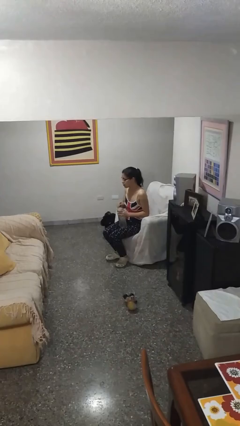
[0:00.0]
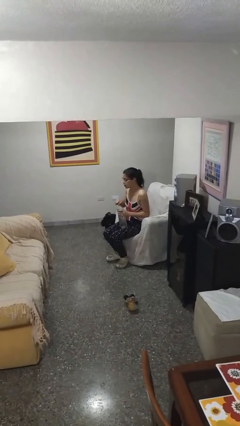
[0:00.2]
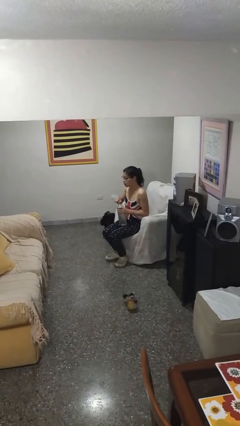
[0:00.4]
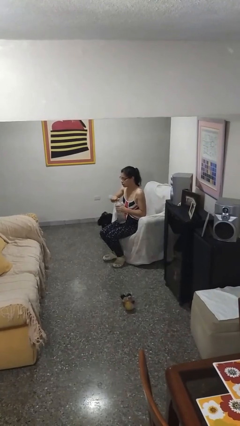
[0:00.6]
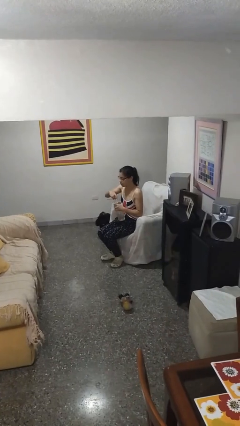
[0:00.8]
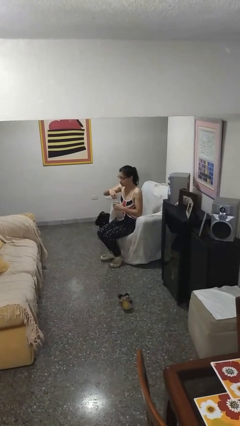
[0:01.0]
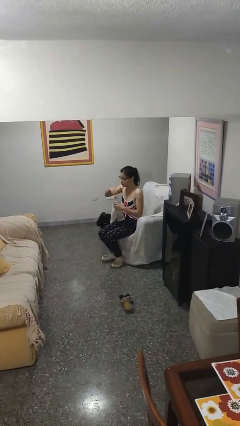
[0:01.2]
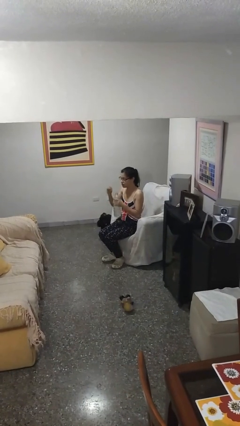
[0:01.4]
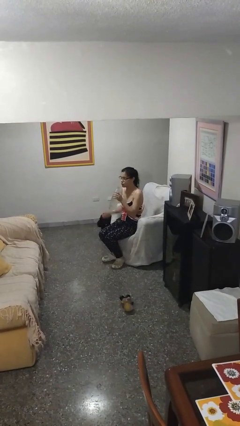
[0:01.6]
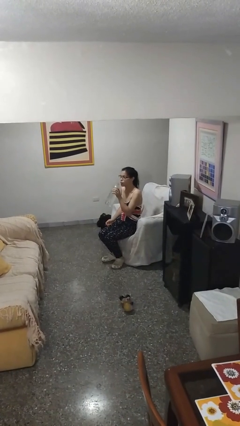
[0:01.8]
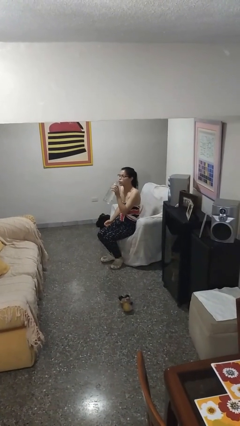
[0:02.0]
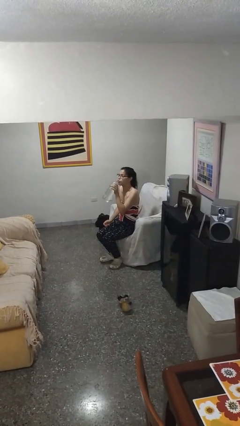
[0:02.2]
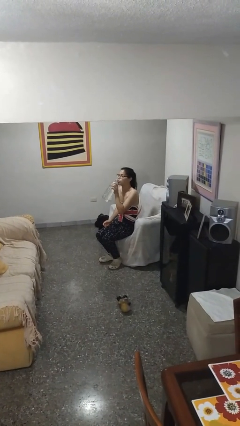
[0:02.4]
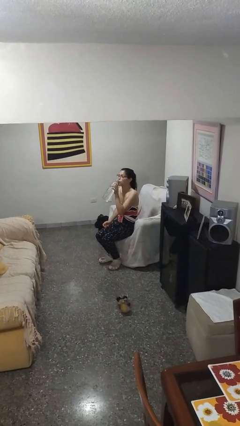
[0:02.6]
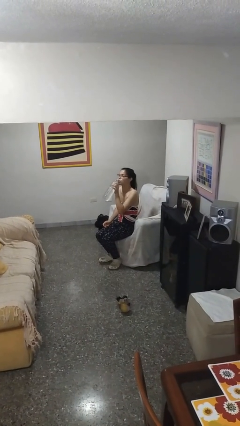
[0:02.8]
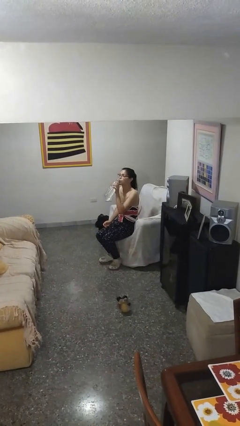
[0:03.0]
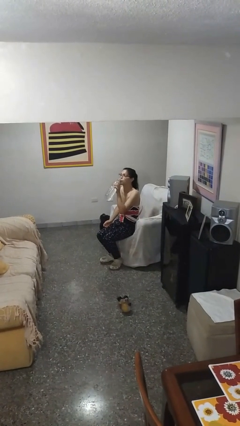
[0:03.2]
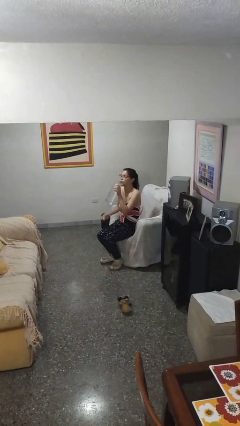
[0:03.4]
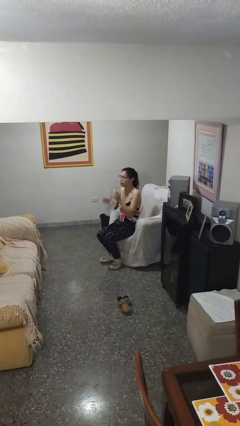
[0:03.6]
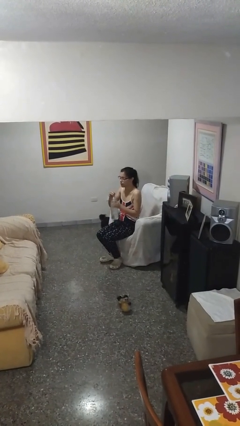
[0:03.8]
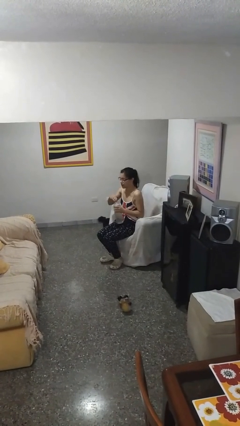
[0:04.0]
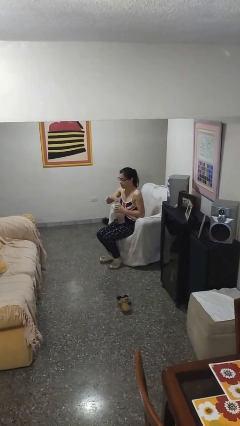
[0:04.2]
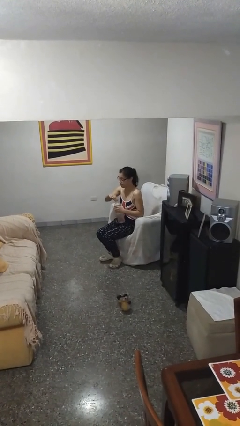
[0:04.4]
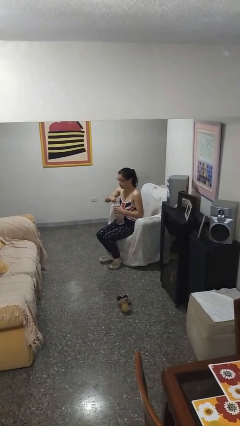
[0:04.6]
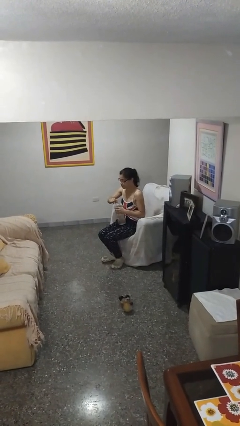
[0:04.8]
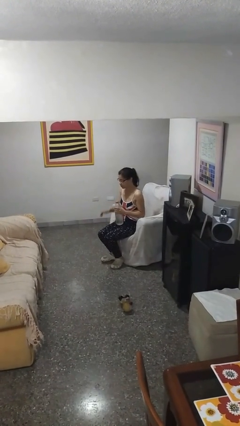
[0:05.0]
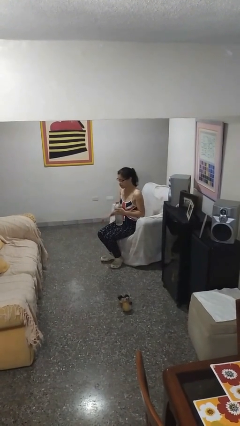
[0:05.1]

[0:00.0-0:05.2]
person drinks from bottle

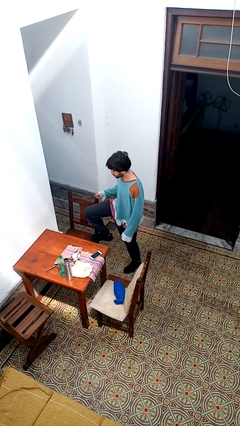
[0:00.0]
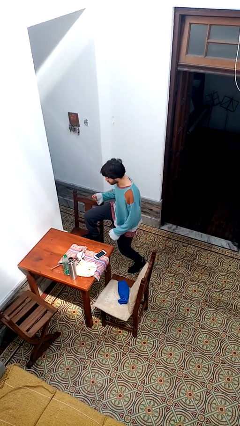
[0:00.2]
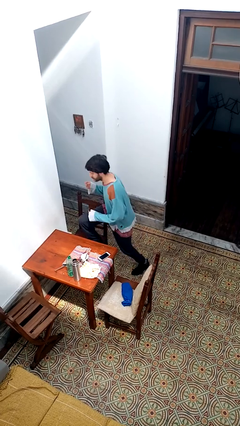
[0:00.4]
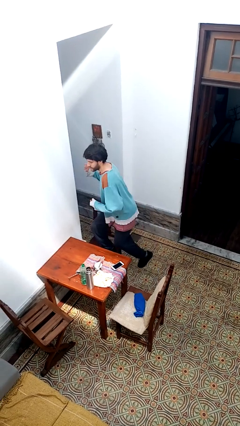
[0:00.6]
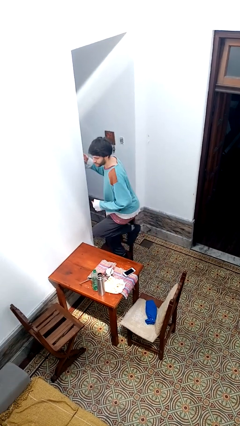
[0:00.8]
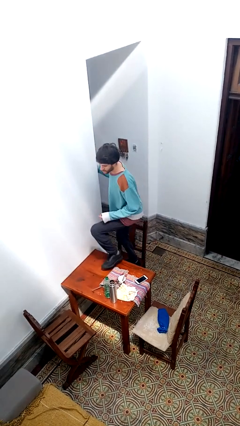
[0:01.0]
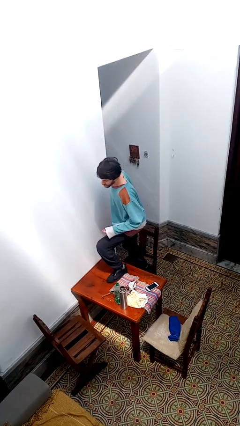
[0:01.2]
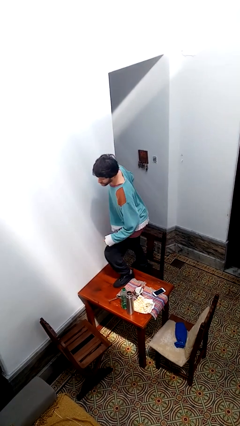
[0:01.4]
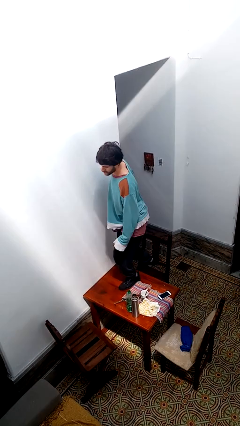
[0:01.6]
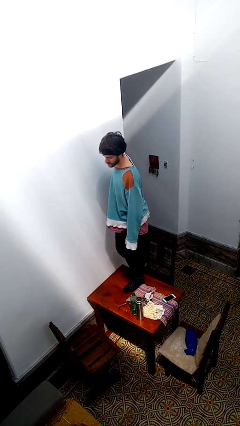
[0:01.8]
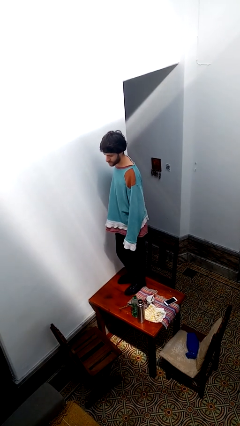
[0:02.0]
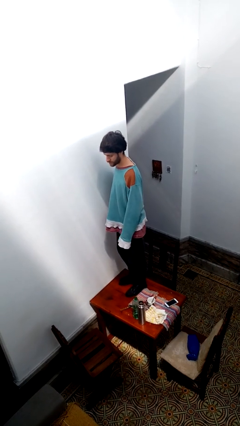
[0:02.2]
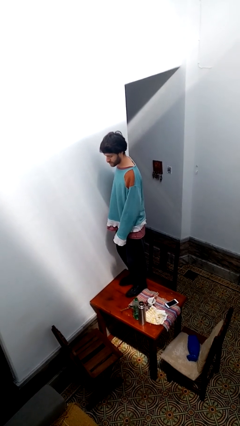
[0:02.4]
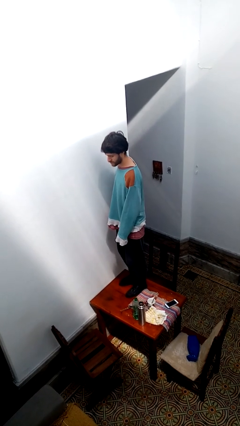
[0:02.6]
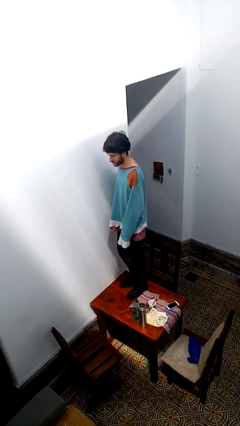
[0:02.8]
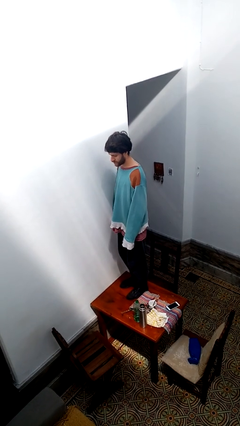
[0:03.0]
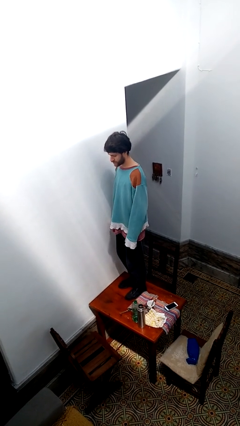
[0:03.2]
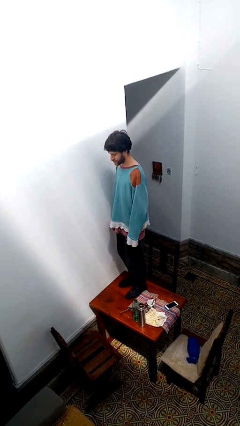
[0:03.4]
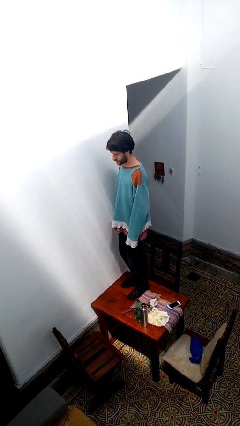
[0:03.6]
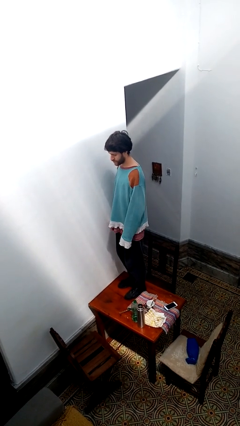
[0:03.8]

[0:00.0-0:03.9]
person climbs on table

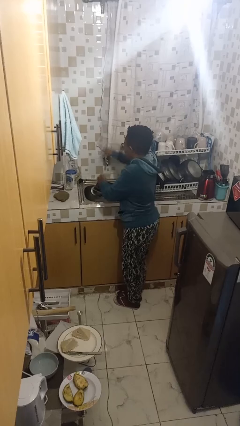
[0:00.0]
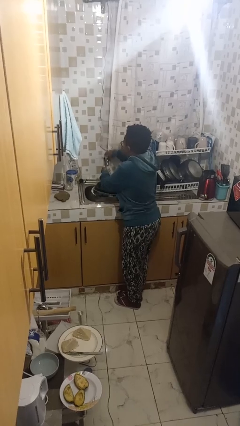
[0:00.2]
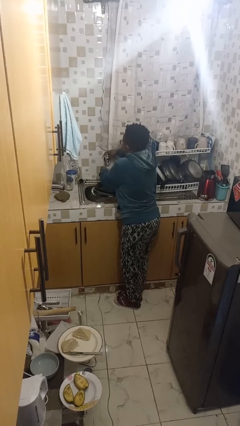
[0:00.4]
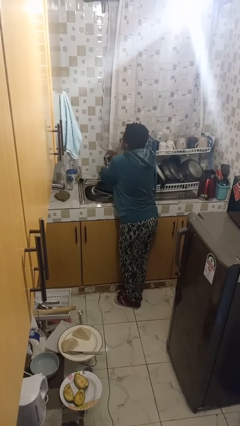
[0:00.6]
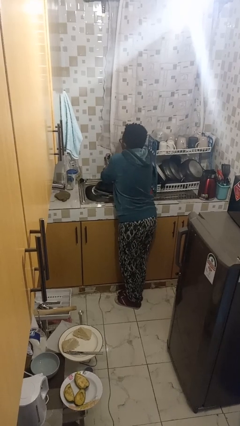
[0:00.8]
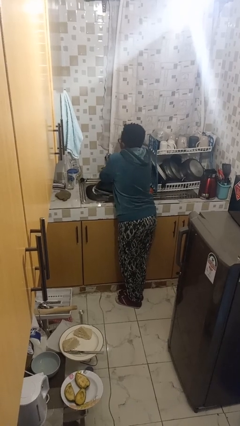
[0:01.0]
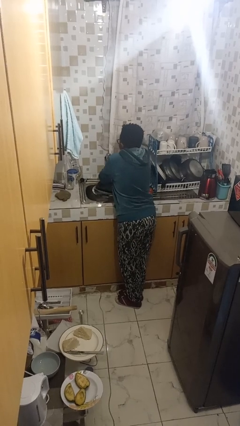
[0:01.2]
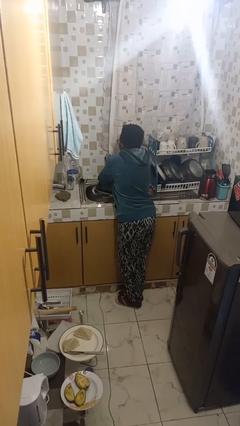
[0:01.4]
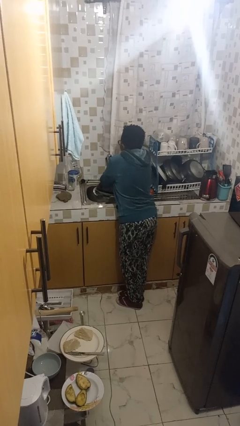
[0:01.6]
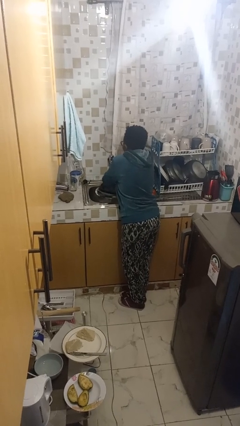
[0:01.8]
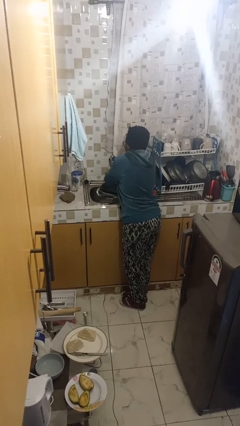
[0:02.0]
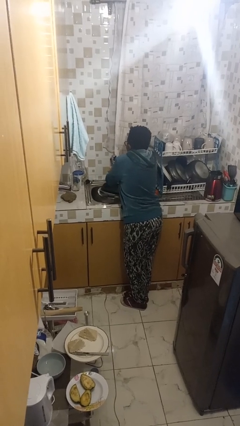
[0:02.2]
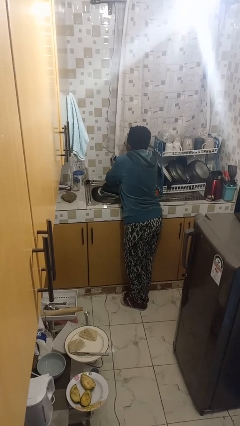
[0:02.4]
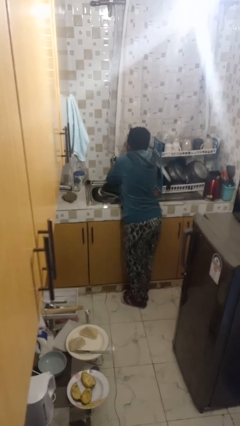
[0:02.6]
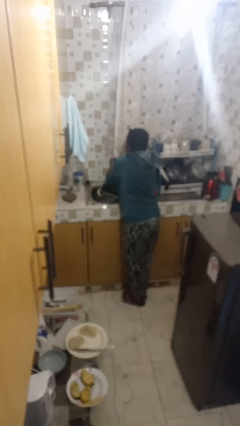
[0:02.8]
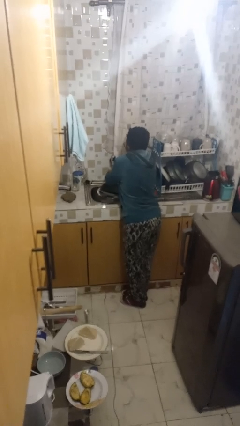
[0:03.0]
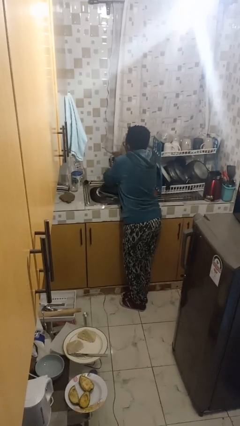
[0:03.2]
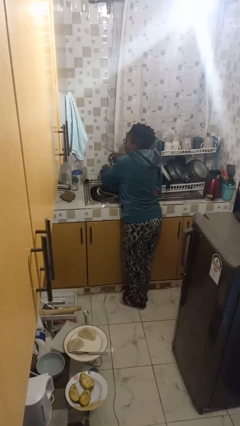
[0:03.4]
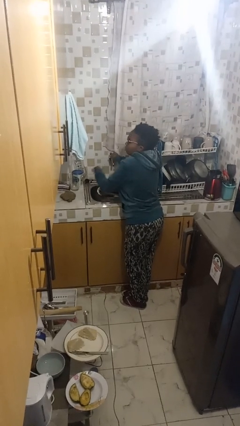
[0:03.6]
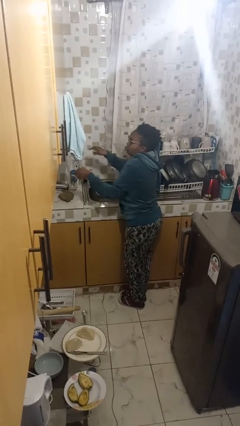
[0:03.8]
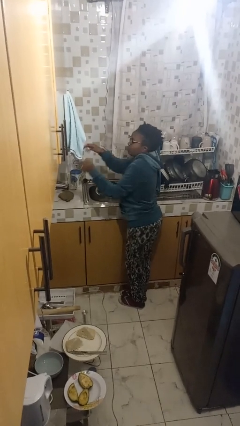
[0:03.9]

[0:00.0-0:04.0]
person washes hands

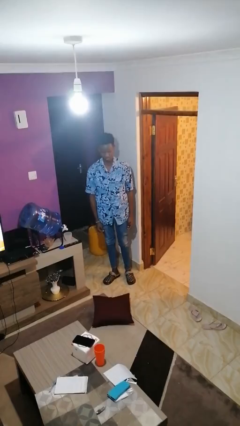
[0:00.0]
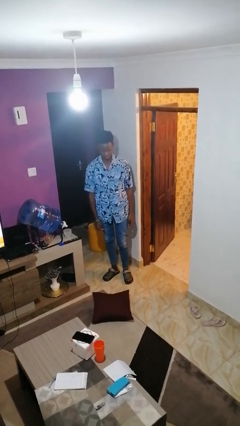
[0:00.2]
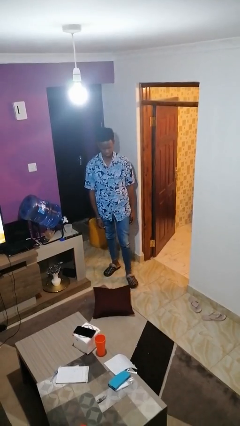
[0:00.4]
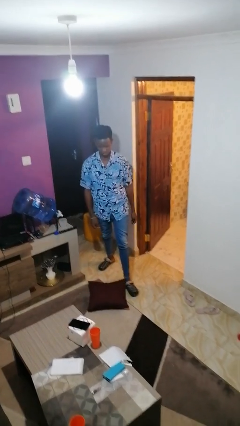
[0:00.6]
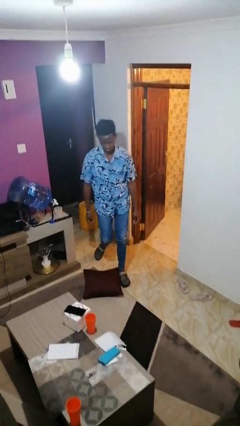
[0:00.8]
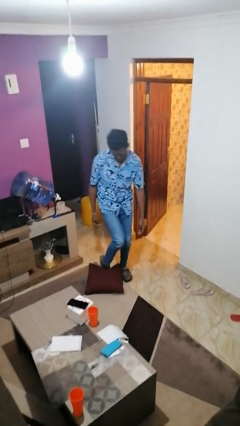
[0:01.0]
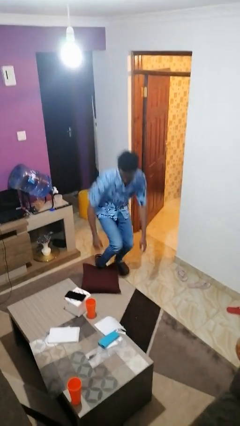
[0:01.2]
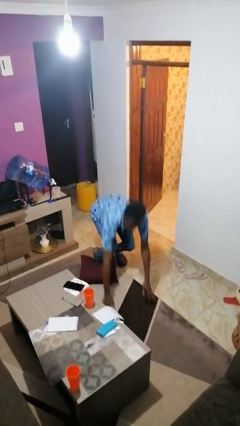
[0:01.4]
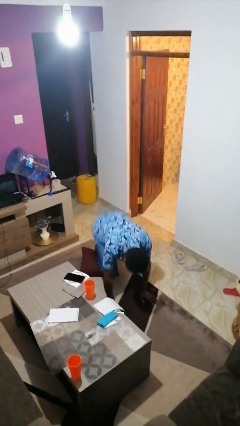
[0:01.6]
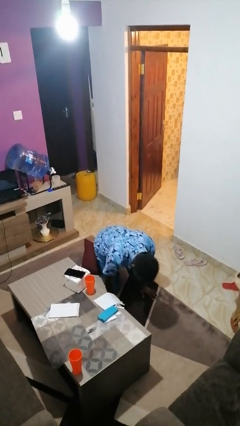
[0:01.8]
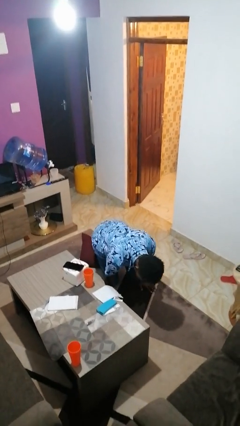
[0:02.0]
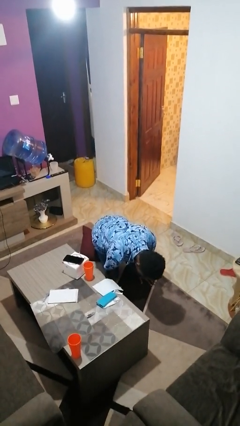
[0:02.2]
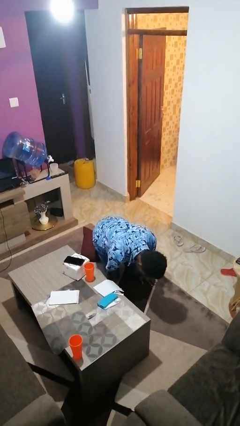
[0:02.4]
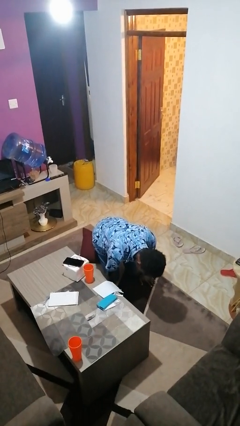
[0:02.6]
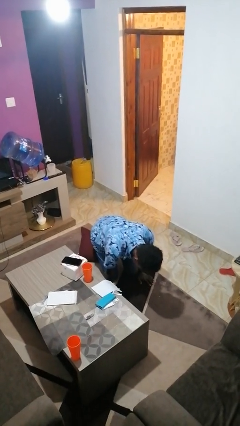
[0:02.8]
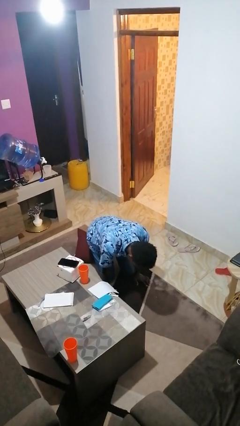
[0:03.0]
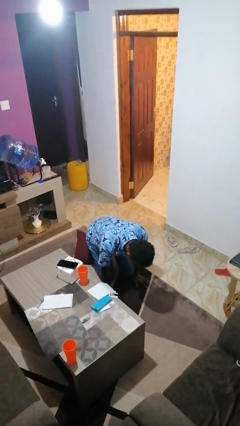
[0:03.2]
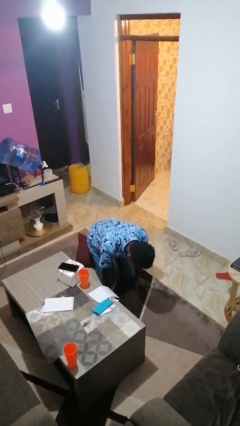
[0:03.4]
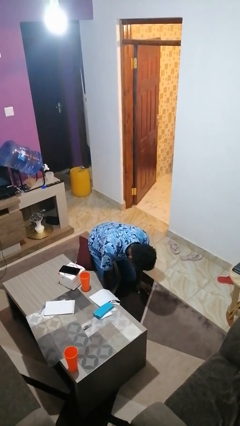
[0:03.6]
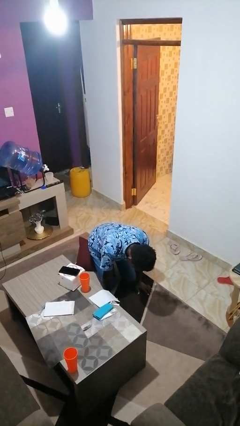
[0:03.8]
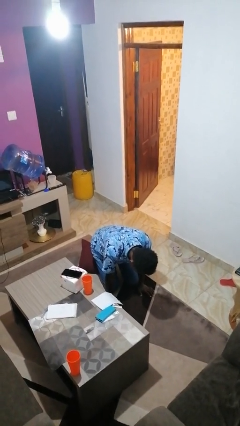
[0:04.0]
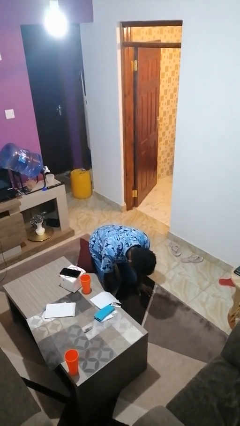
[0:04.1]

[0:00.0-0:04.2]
person trips on object on floor

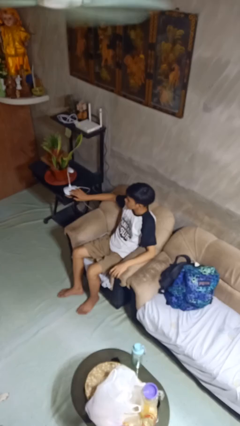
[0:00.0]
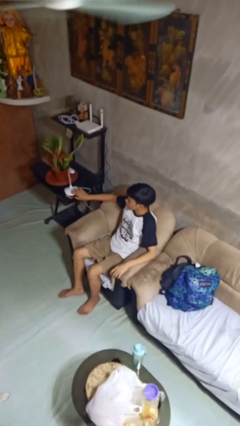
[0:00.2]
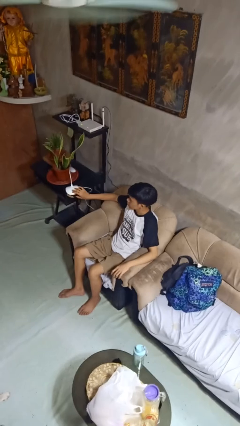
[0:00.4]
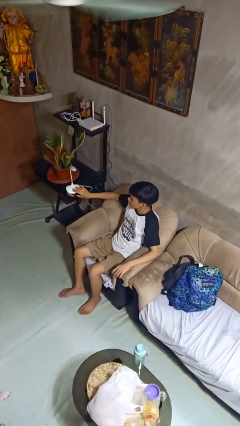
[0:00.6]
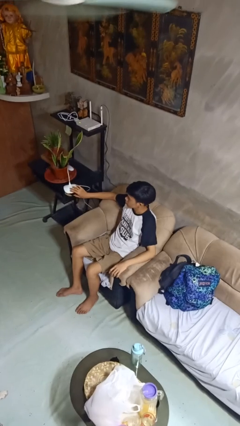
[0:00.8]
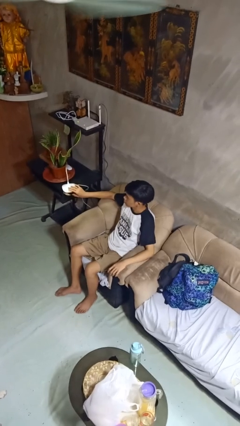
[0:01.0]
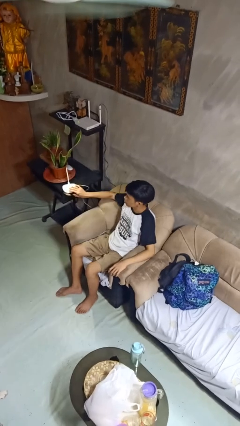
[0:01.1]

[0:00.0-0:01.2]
person turns on lamp
